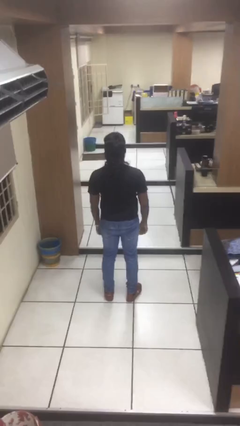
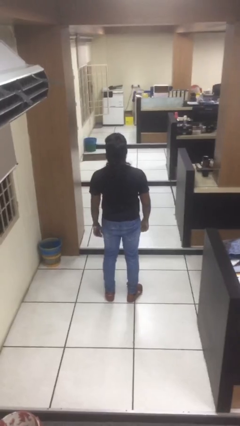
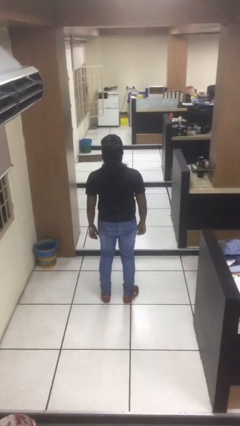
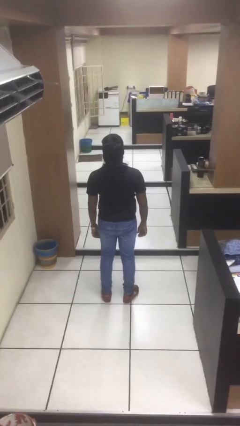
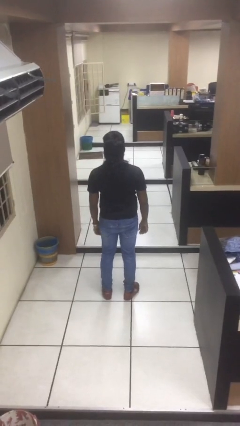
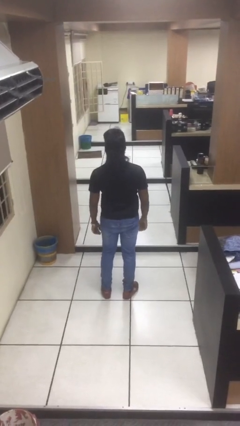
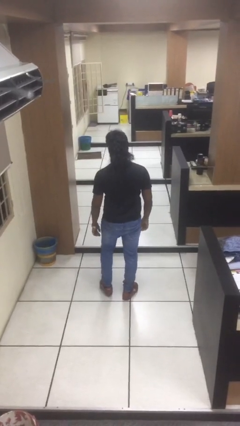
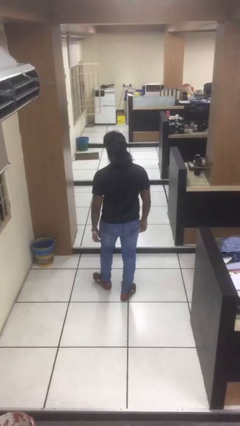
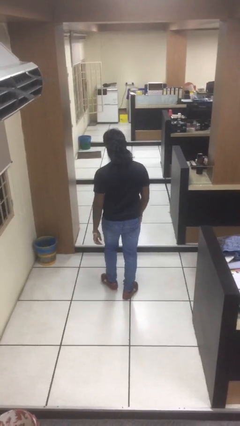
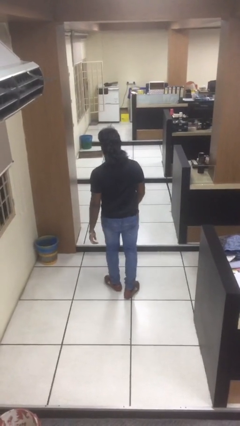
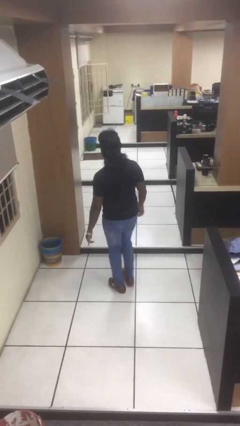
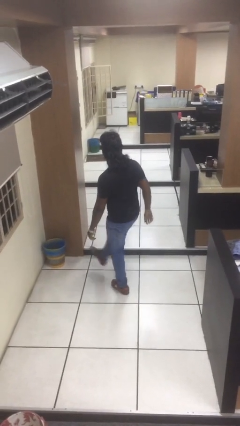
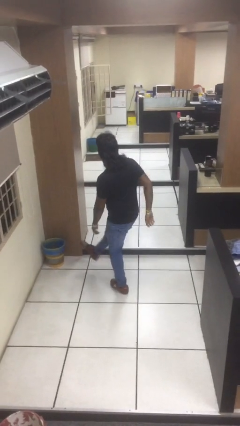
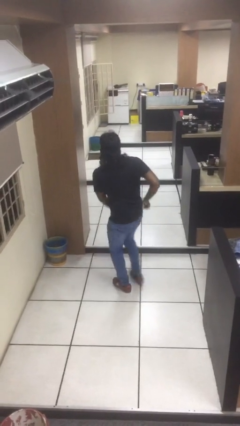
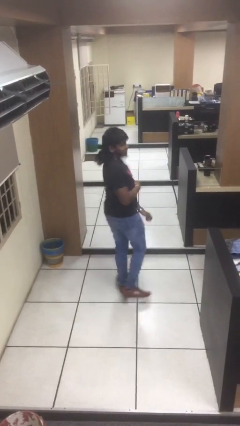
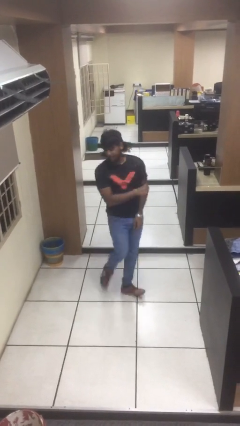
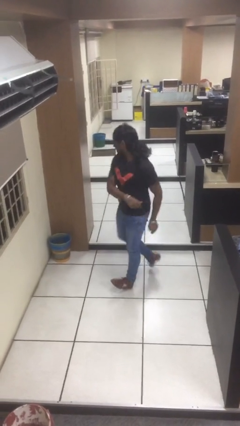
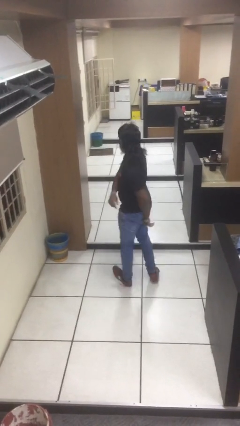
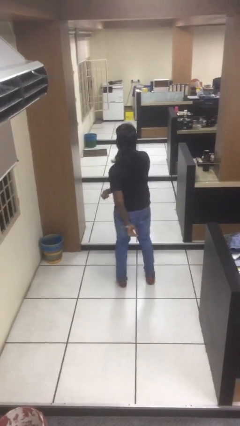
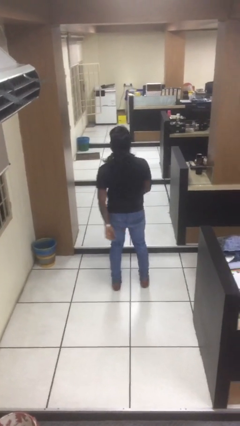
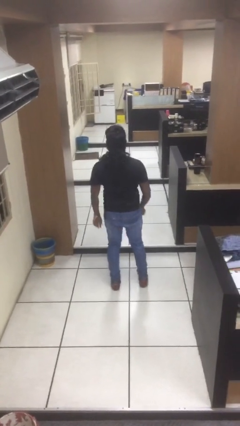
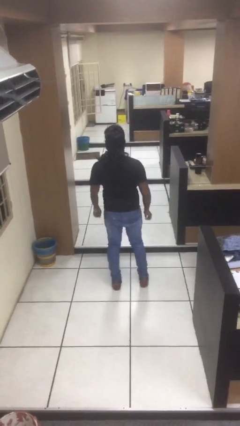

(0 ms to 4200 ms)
person twirls

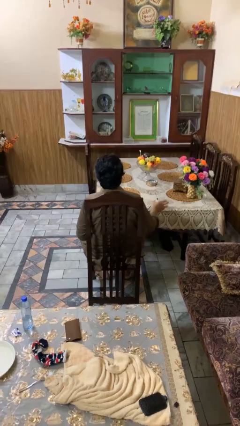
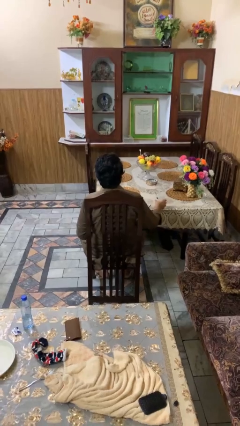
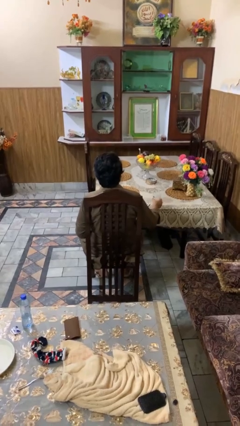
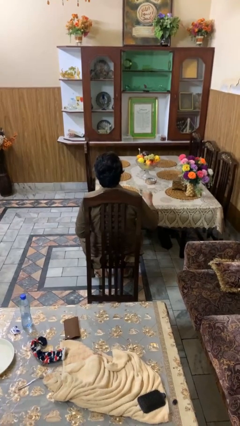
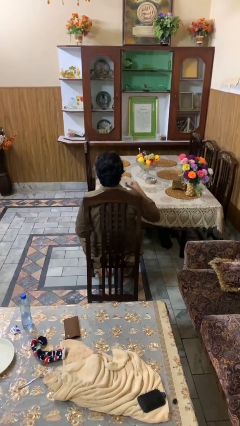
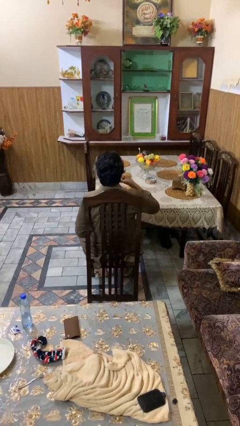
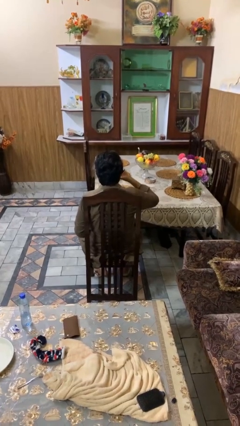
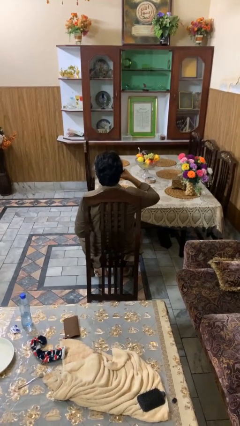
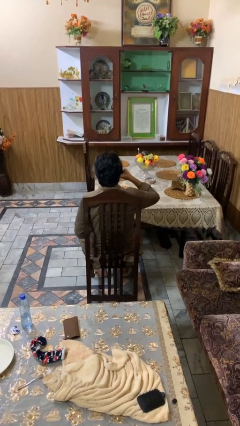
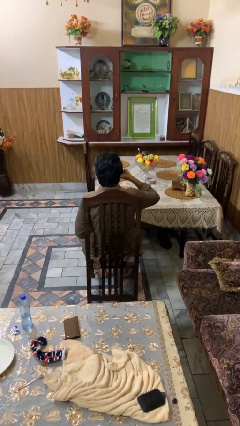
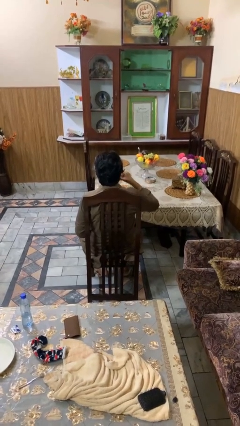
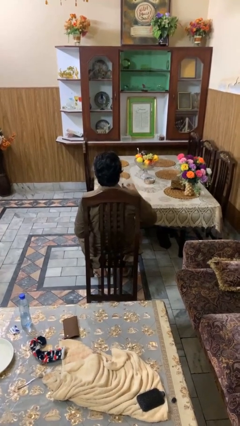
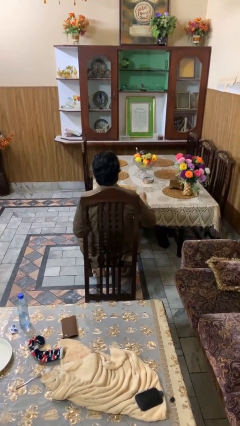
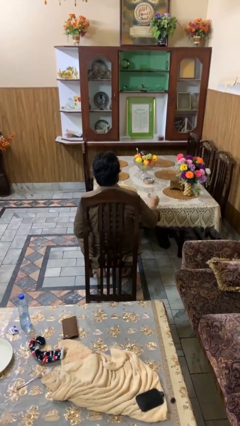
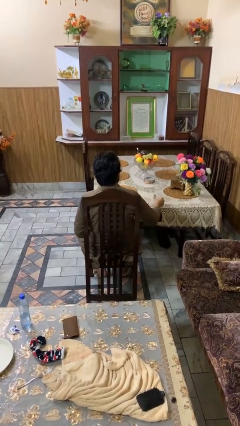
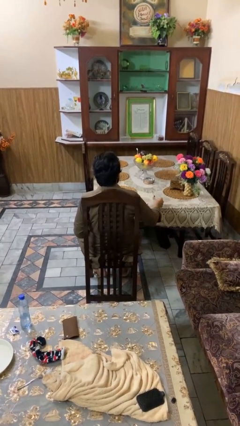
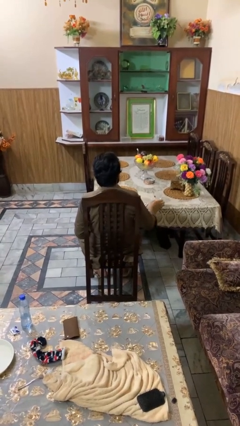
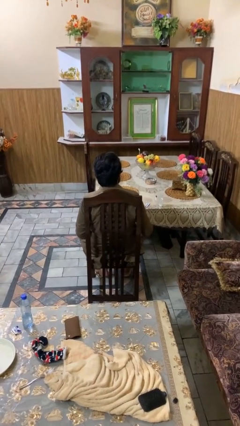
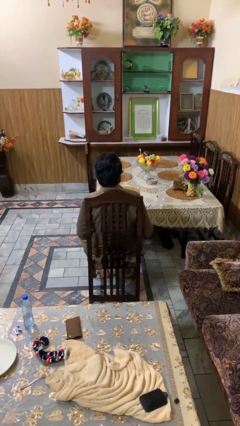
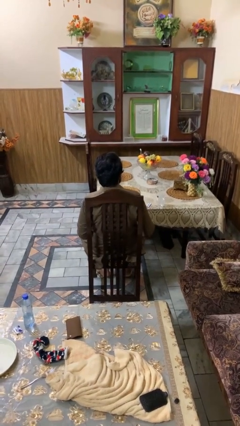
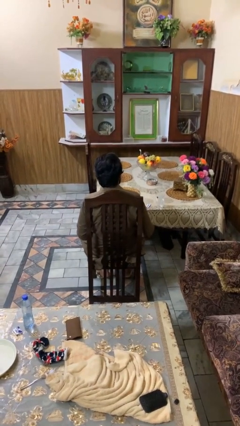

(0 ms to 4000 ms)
person drinks from cup

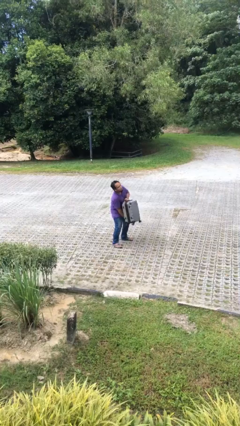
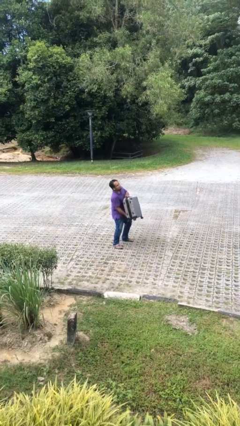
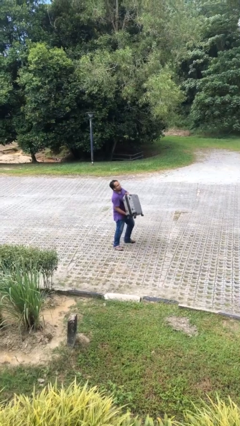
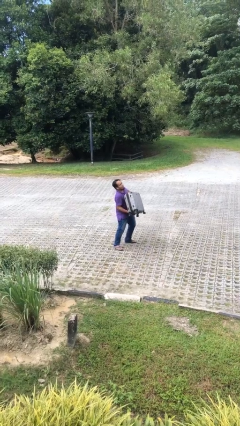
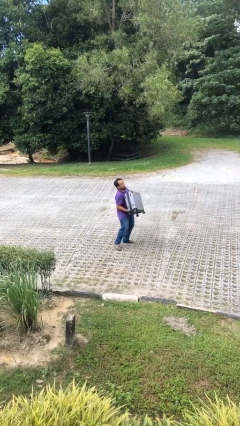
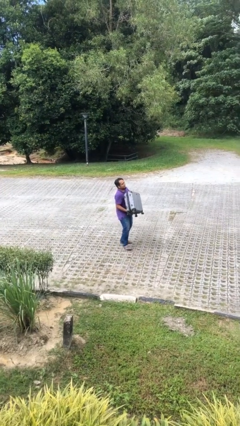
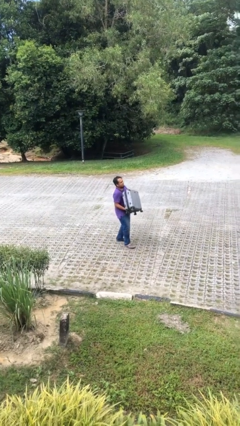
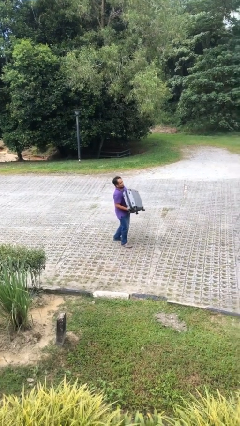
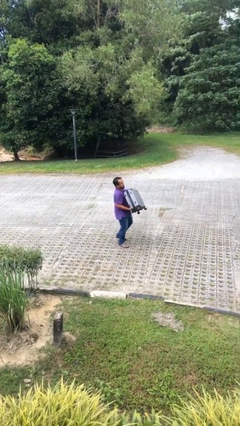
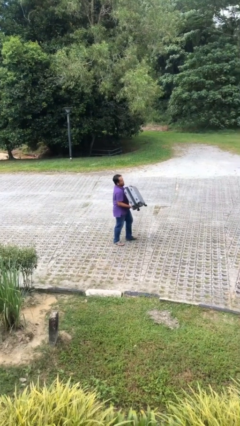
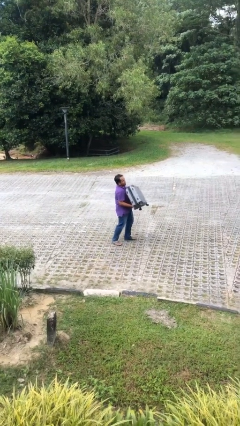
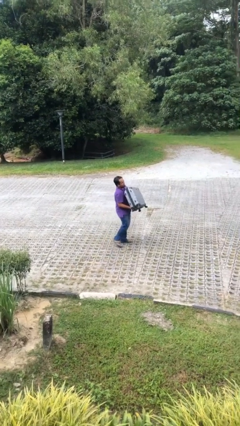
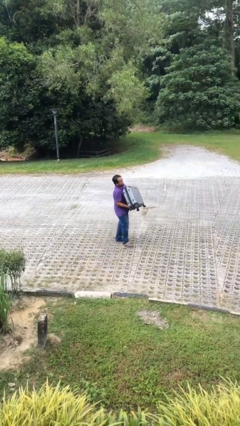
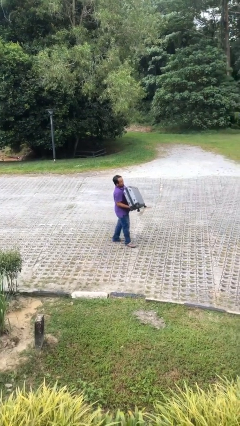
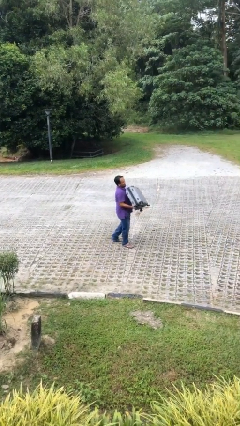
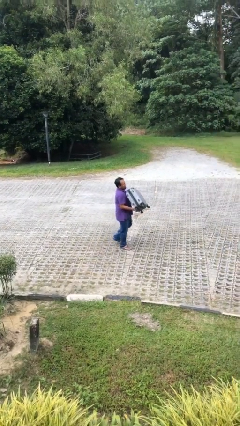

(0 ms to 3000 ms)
person carries heavy object

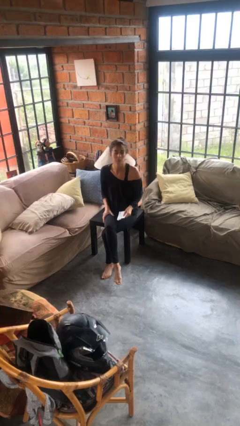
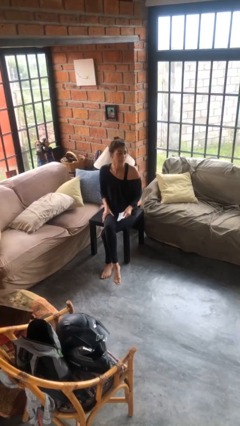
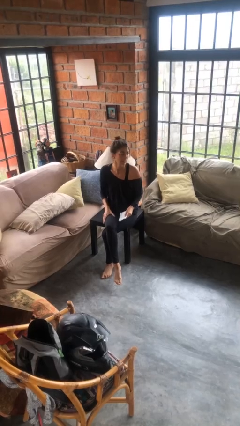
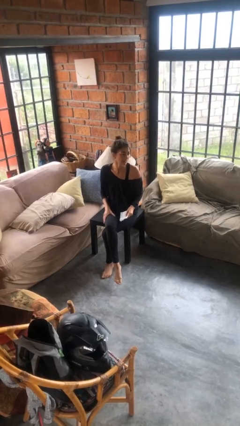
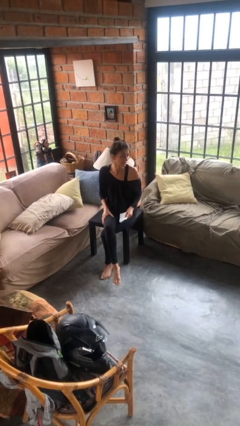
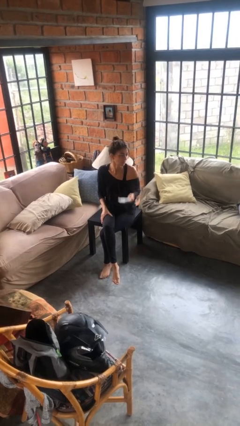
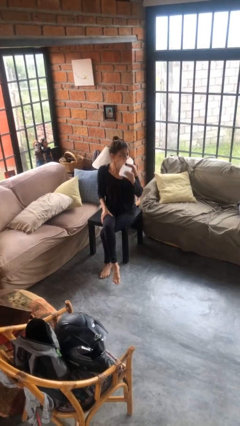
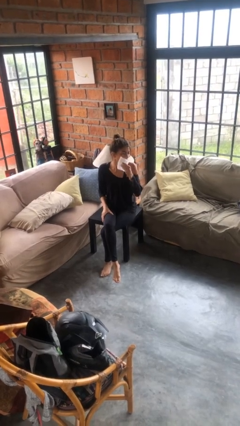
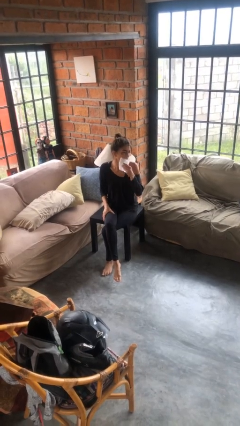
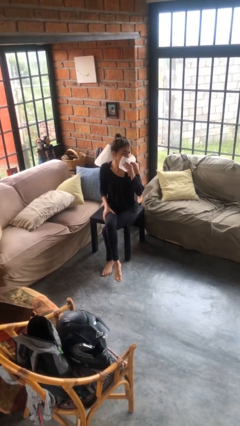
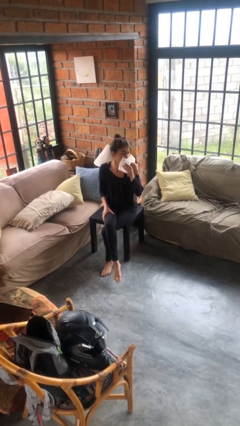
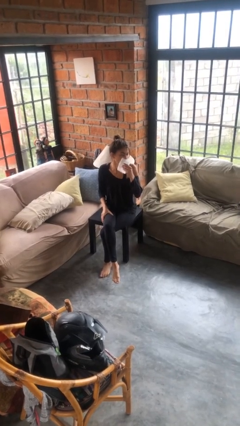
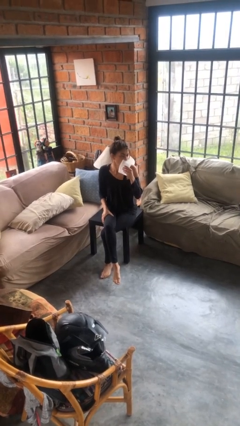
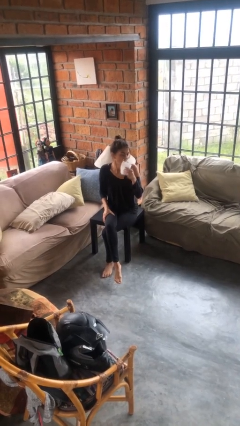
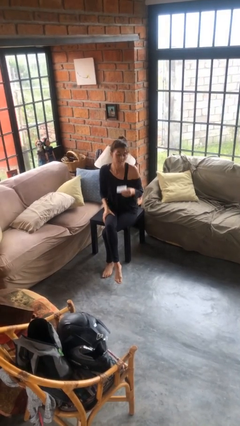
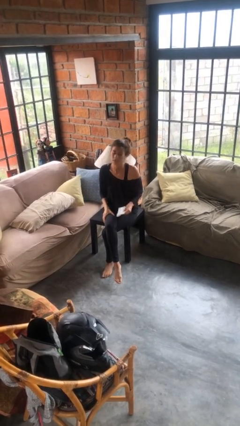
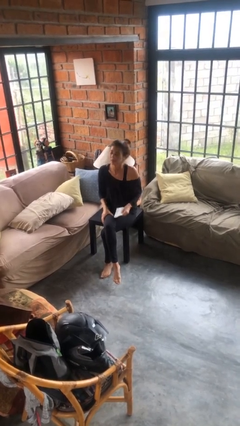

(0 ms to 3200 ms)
person wipes mouth with napkin

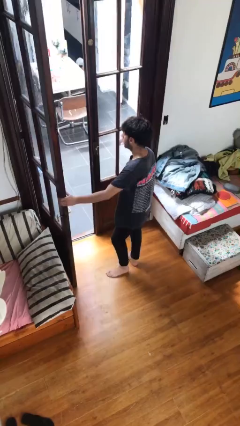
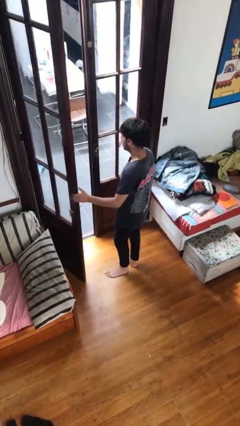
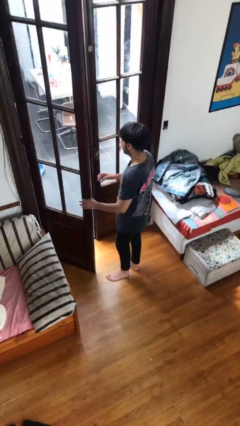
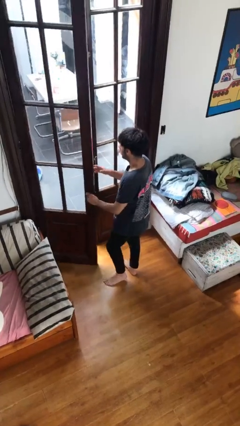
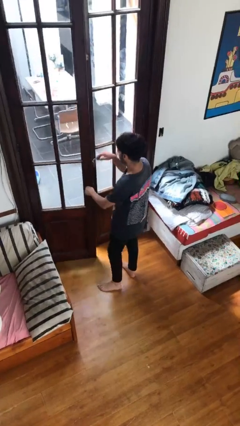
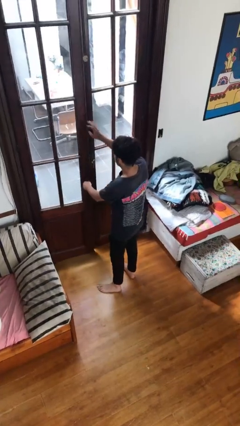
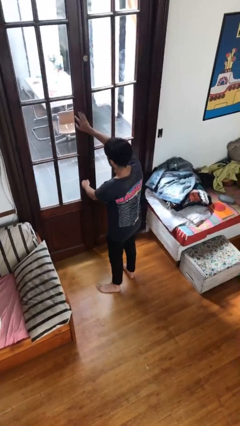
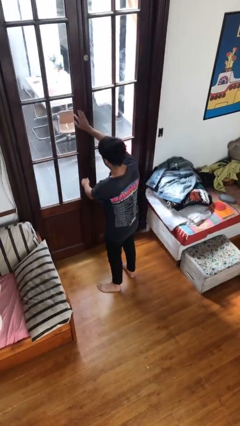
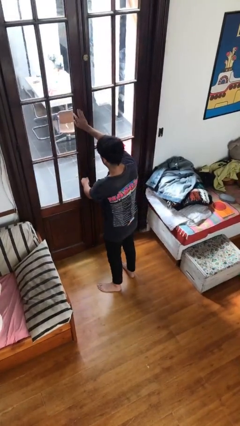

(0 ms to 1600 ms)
person closes facility door

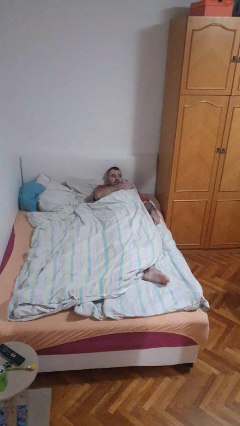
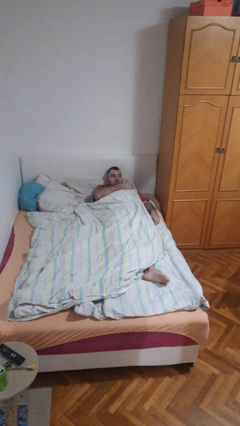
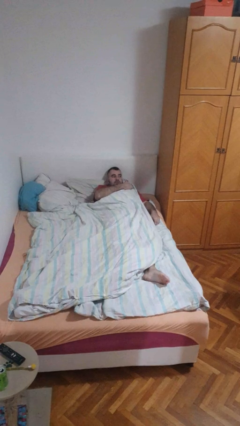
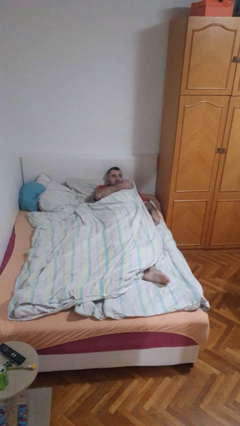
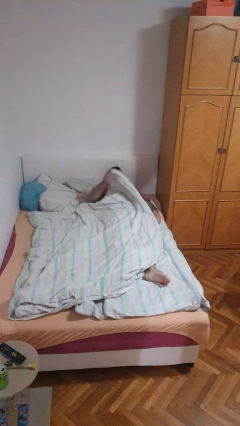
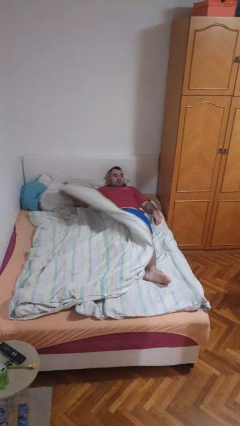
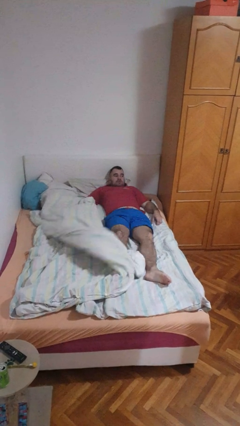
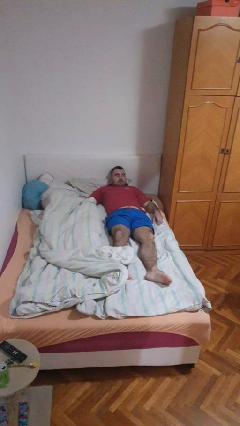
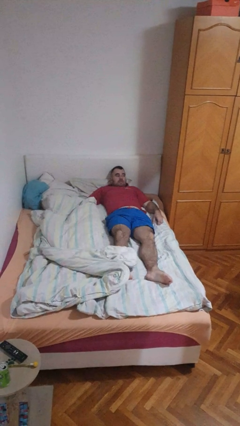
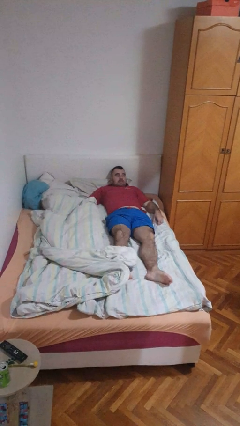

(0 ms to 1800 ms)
person uncovers with bedsheets
